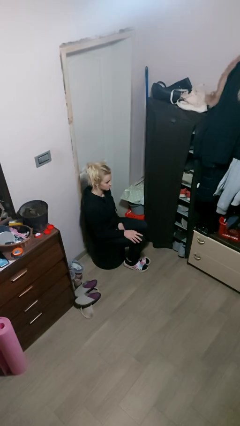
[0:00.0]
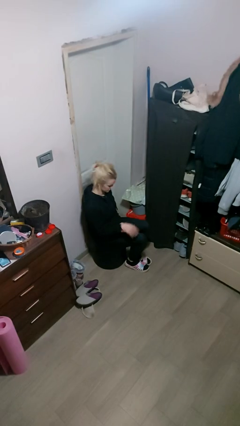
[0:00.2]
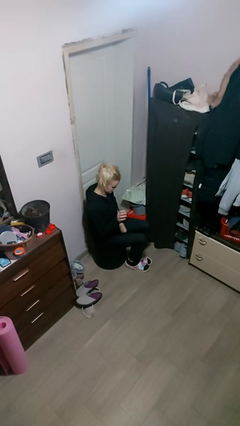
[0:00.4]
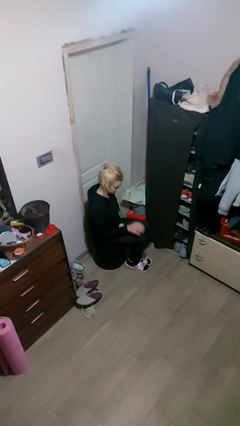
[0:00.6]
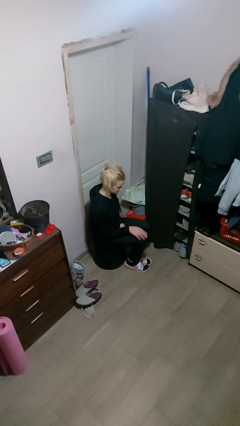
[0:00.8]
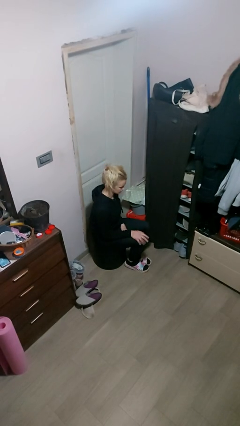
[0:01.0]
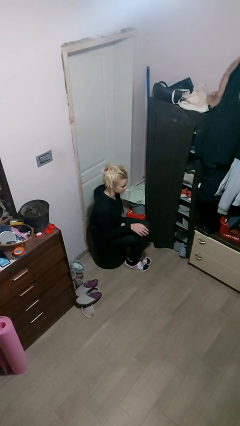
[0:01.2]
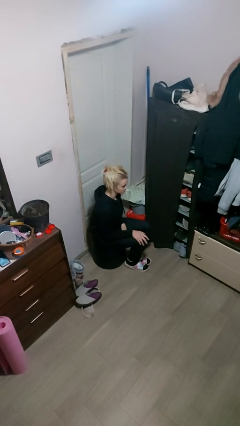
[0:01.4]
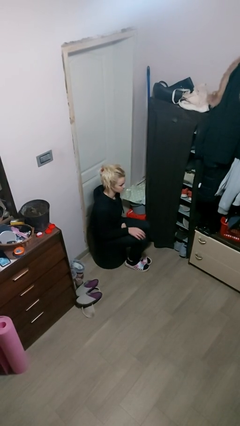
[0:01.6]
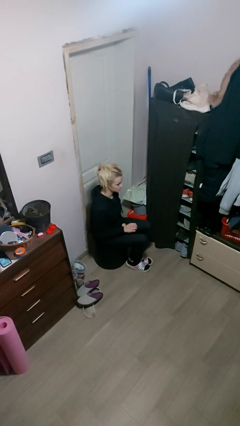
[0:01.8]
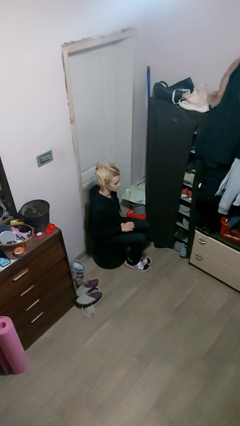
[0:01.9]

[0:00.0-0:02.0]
person slaps hands on thighs

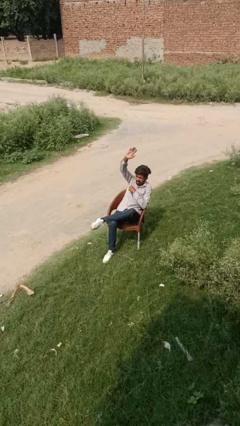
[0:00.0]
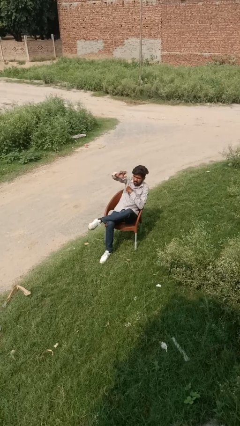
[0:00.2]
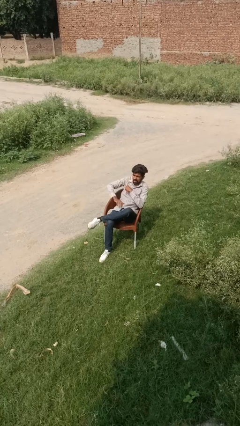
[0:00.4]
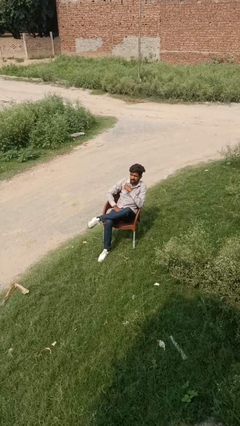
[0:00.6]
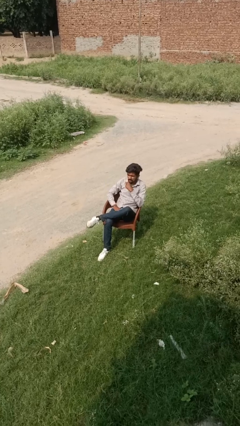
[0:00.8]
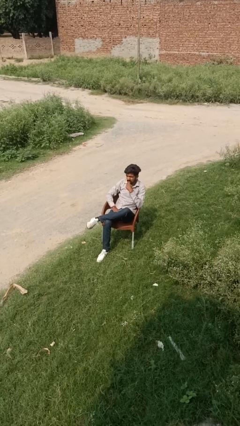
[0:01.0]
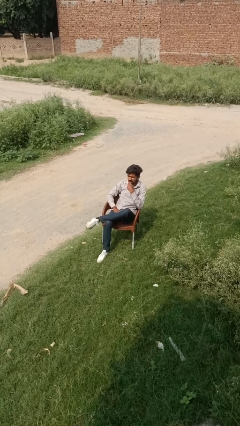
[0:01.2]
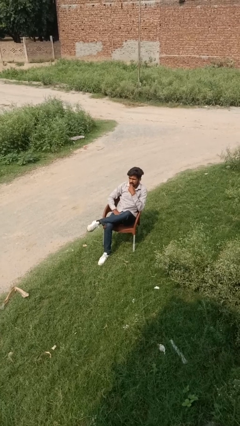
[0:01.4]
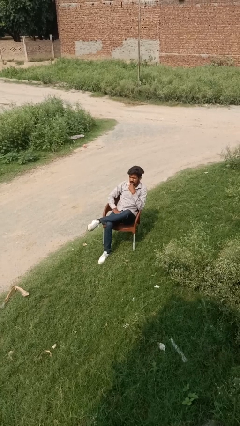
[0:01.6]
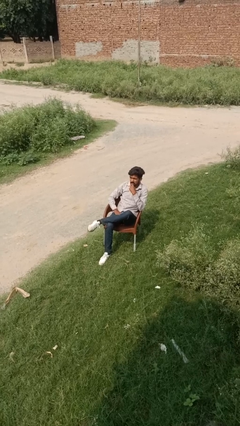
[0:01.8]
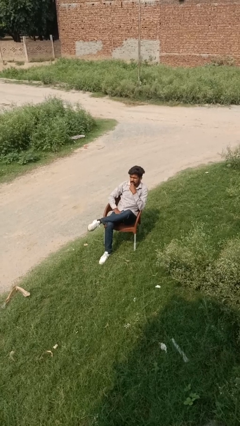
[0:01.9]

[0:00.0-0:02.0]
person gestures lower hand

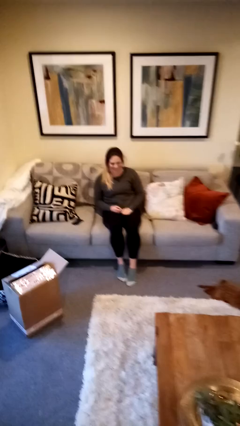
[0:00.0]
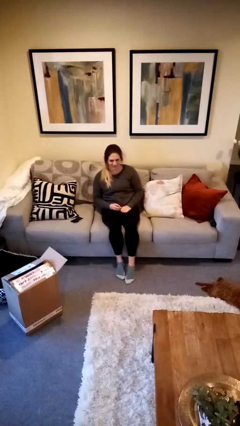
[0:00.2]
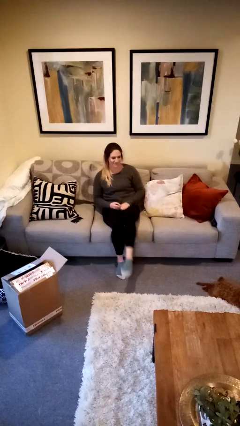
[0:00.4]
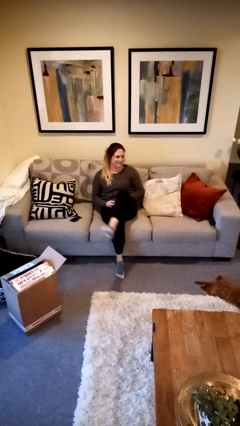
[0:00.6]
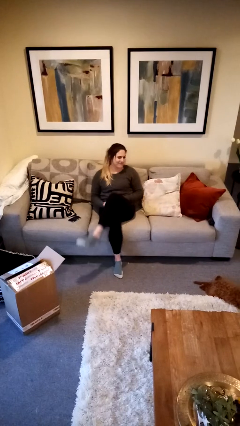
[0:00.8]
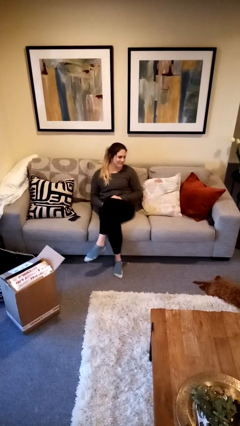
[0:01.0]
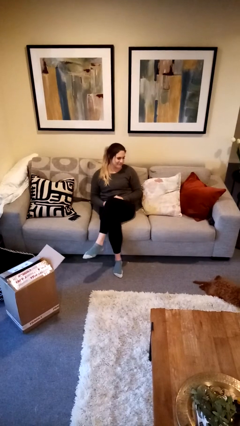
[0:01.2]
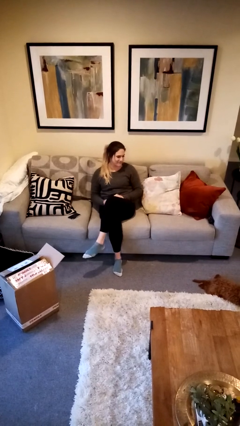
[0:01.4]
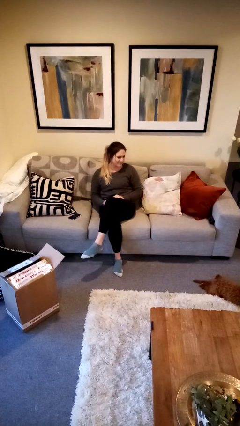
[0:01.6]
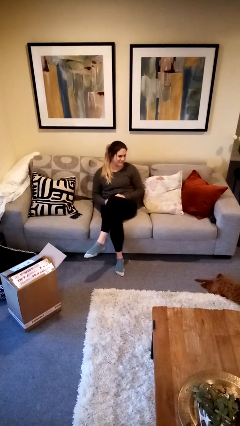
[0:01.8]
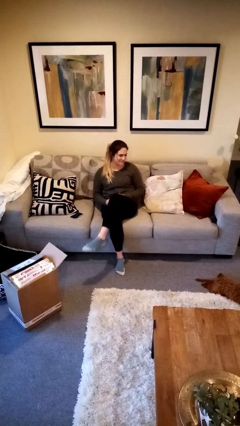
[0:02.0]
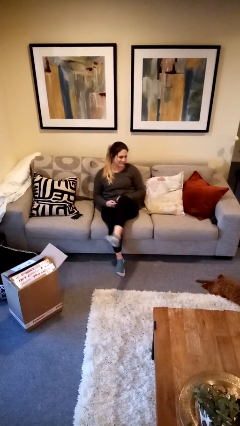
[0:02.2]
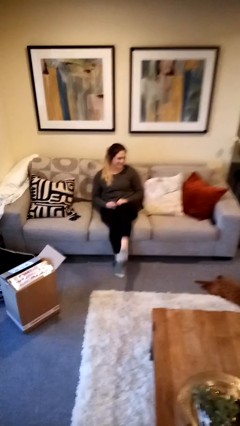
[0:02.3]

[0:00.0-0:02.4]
person crosses legs

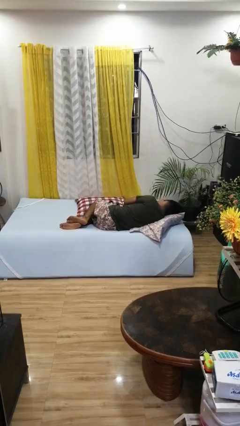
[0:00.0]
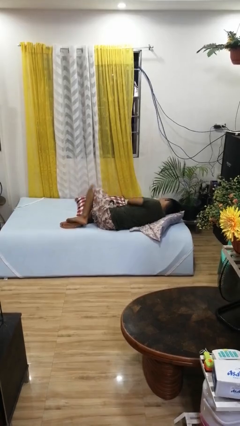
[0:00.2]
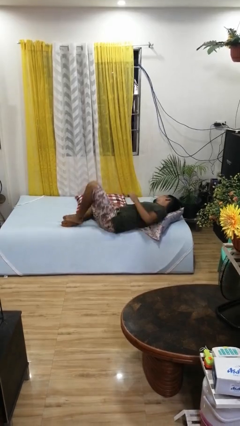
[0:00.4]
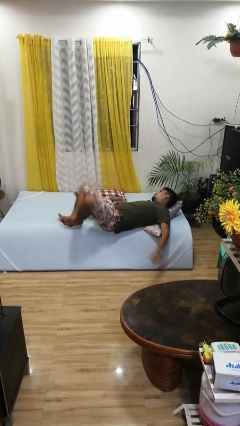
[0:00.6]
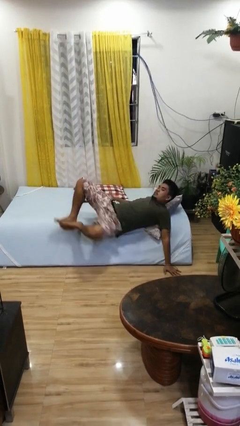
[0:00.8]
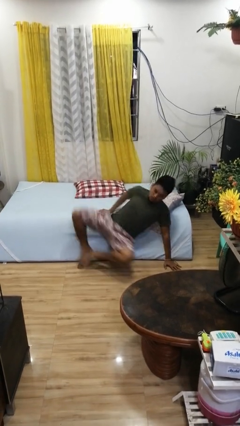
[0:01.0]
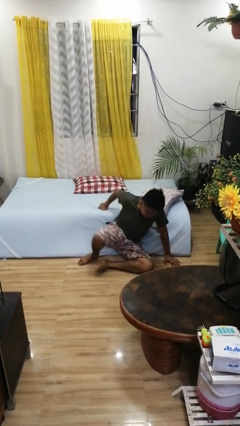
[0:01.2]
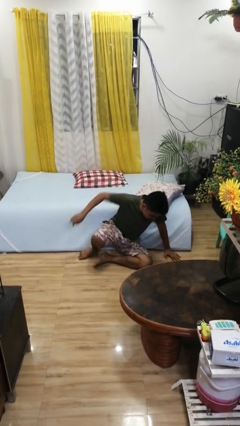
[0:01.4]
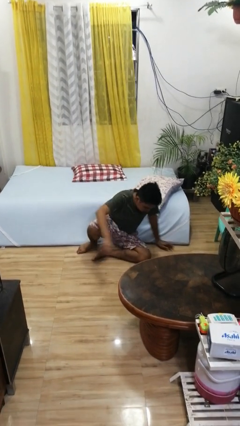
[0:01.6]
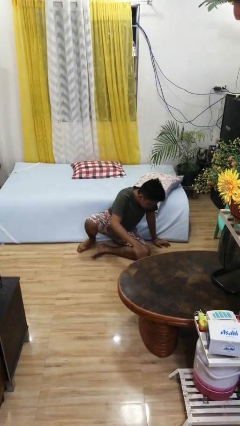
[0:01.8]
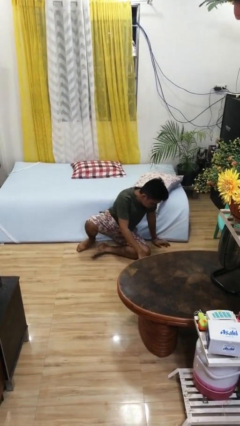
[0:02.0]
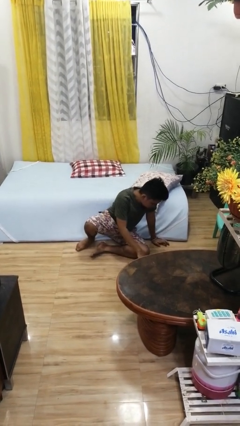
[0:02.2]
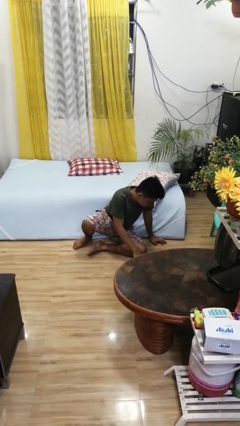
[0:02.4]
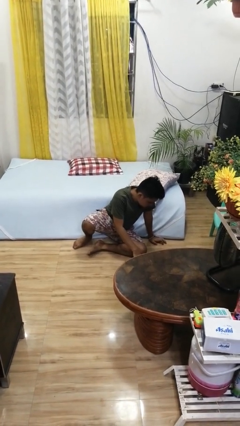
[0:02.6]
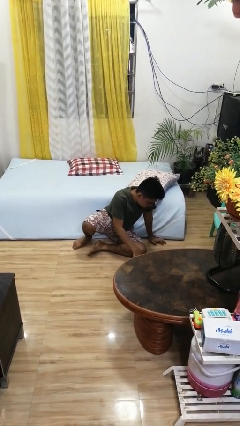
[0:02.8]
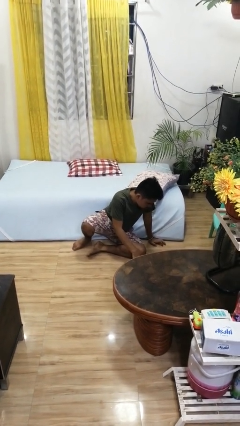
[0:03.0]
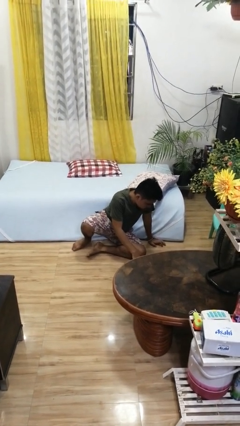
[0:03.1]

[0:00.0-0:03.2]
person falls from bed

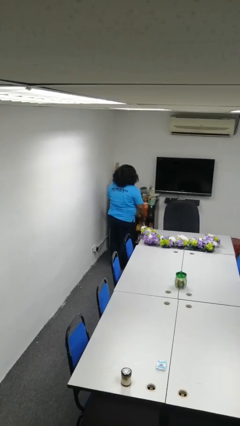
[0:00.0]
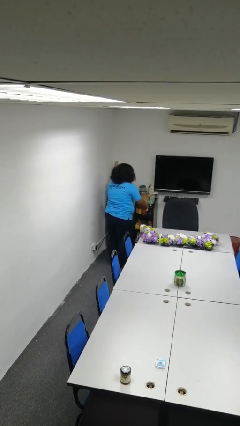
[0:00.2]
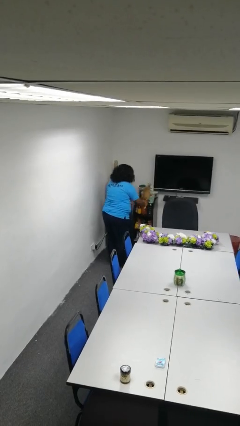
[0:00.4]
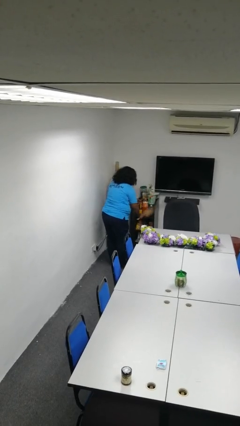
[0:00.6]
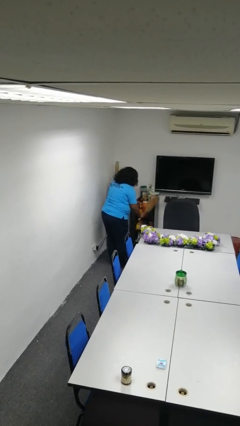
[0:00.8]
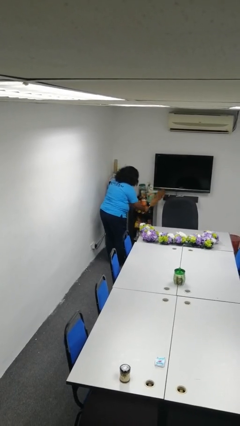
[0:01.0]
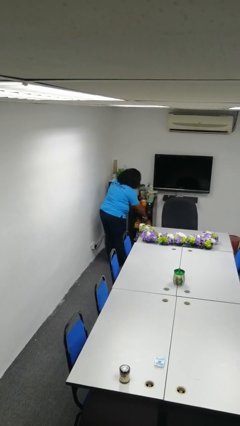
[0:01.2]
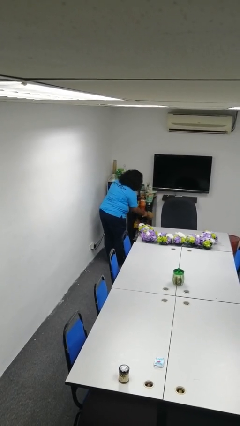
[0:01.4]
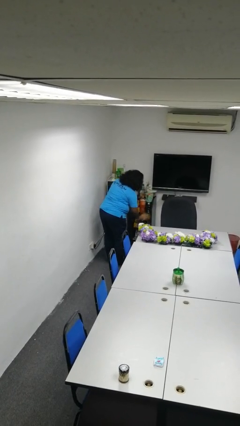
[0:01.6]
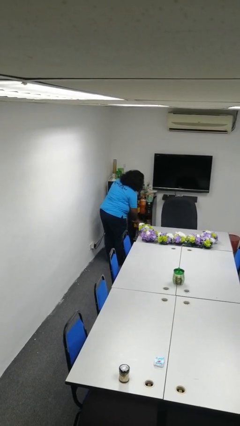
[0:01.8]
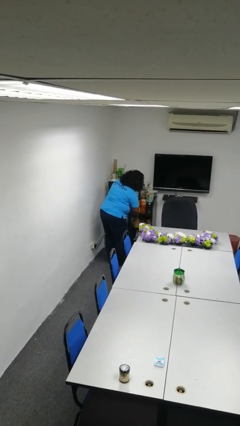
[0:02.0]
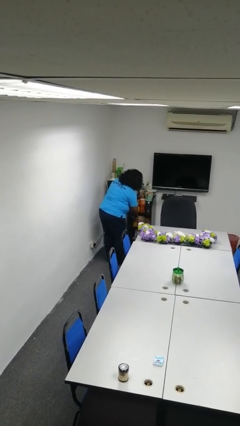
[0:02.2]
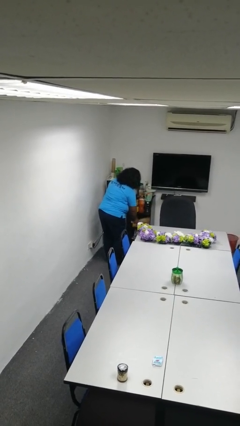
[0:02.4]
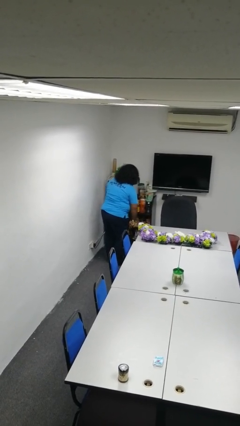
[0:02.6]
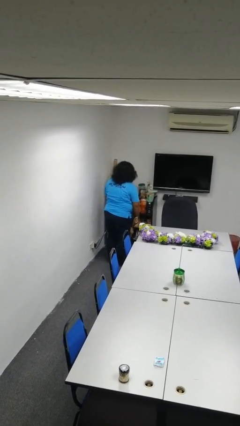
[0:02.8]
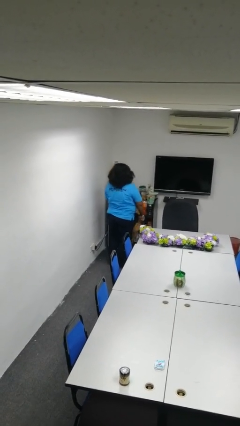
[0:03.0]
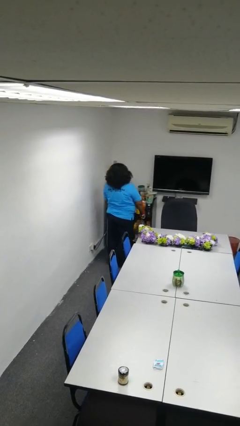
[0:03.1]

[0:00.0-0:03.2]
person dusts furniture

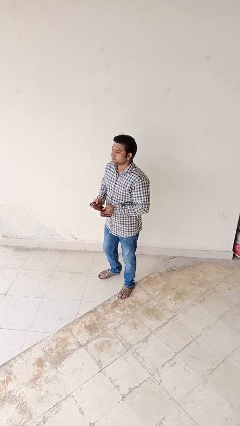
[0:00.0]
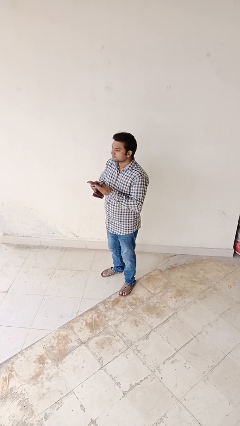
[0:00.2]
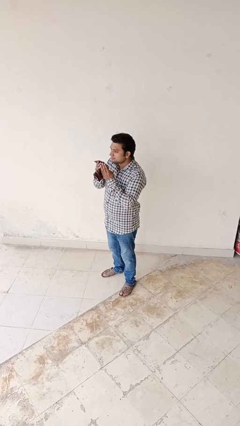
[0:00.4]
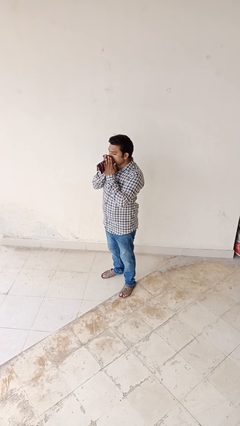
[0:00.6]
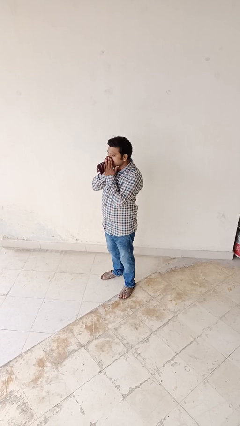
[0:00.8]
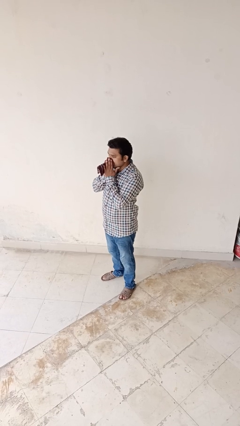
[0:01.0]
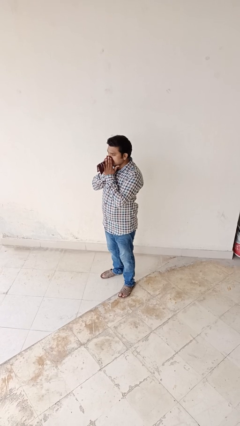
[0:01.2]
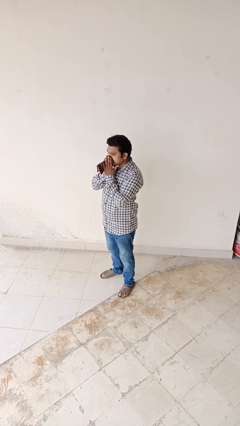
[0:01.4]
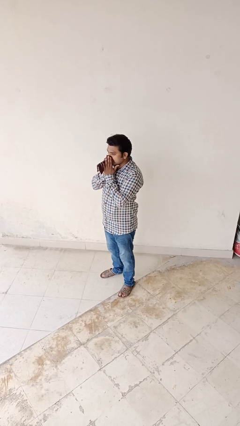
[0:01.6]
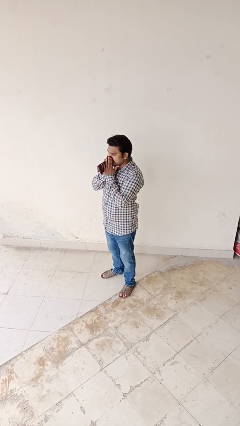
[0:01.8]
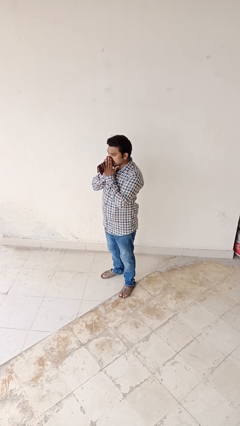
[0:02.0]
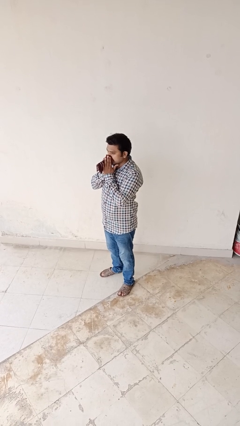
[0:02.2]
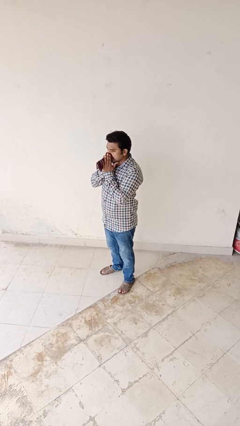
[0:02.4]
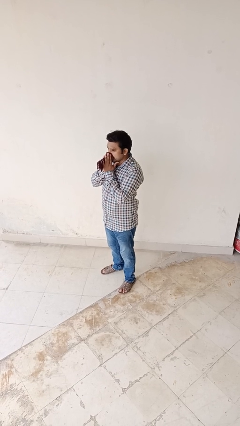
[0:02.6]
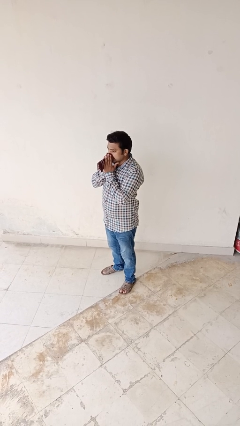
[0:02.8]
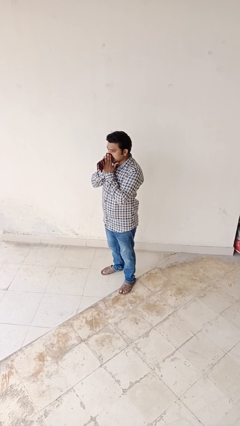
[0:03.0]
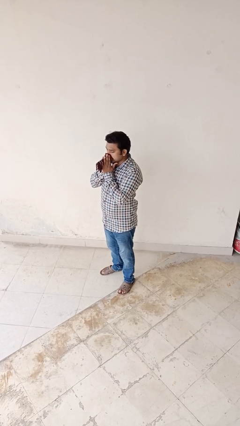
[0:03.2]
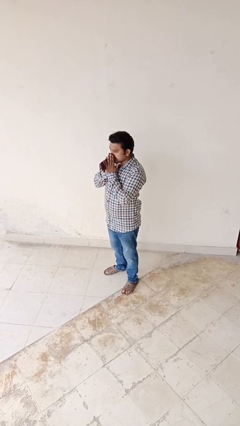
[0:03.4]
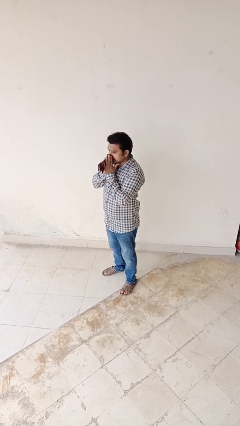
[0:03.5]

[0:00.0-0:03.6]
person blows nose

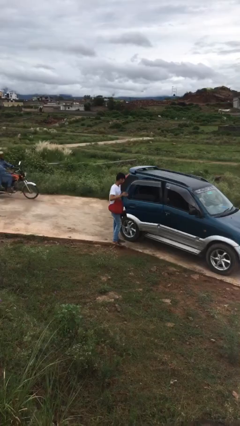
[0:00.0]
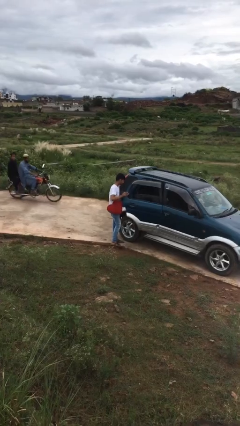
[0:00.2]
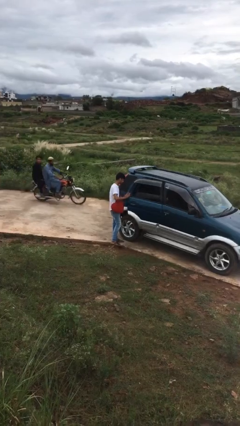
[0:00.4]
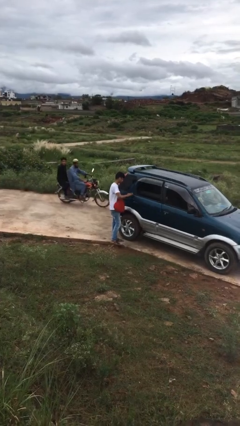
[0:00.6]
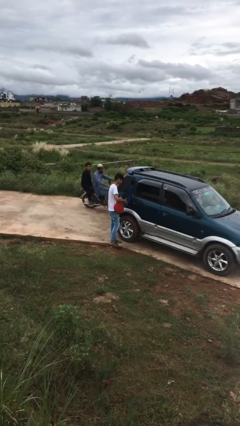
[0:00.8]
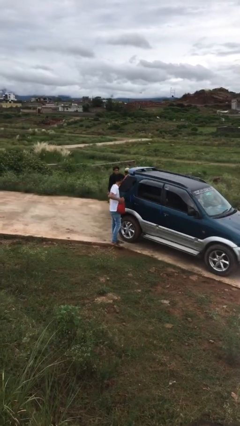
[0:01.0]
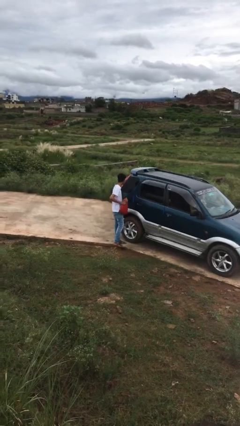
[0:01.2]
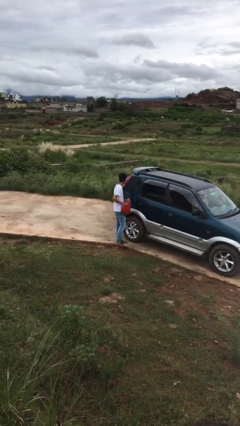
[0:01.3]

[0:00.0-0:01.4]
person closes car door
